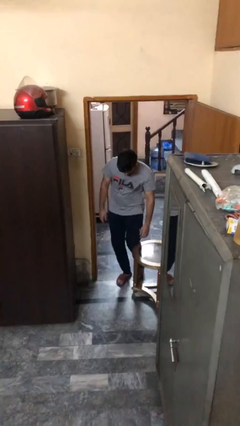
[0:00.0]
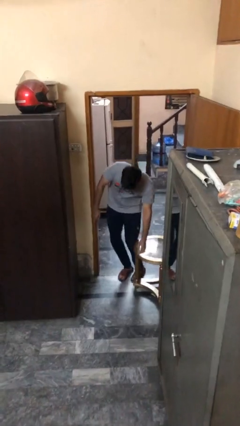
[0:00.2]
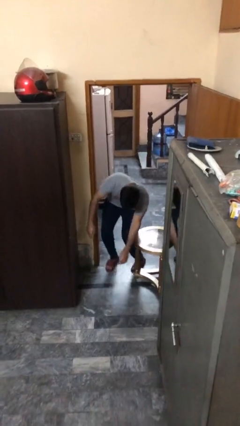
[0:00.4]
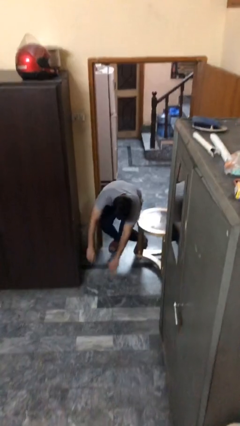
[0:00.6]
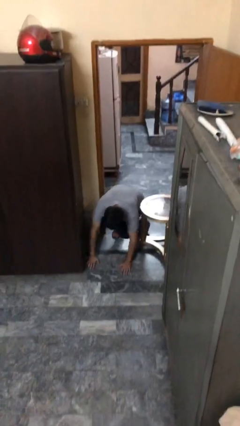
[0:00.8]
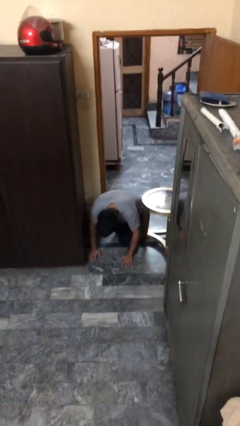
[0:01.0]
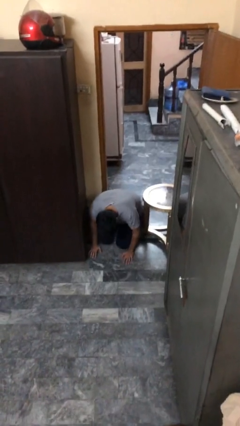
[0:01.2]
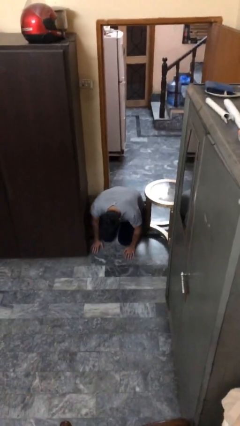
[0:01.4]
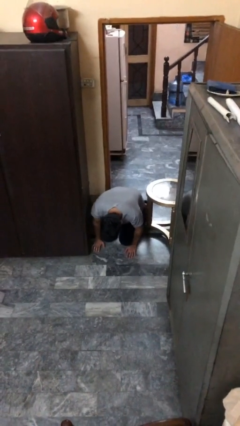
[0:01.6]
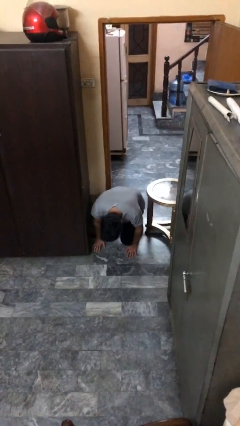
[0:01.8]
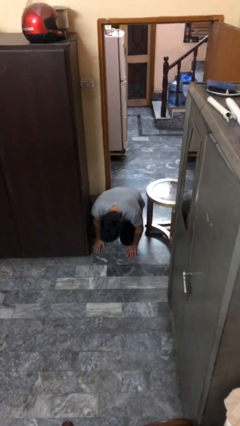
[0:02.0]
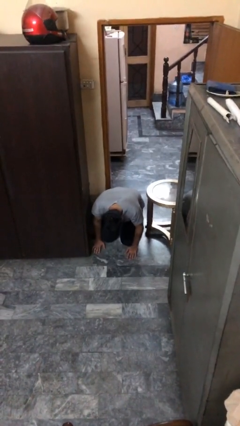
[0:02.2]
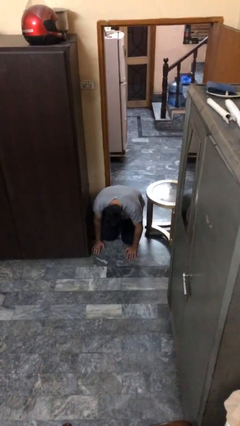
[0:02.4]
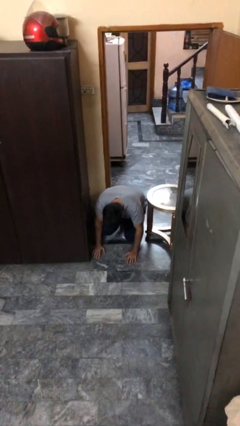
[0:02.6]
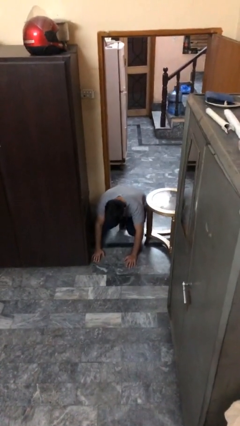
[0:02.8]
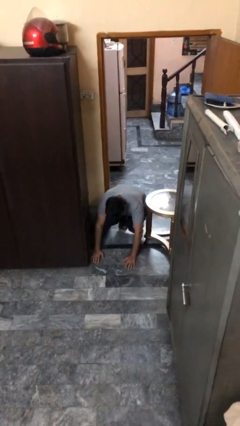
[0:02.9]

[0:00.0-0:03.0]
person trips on object on floor

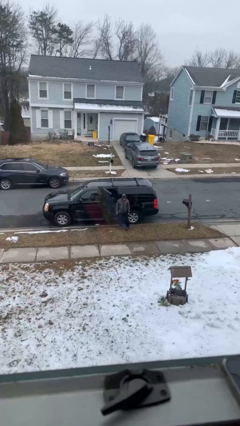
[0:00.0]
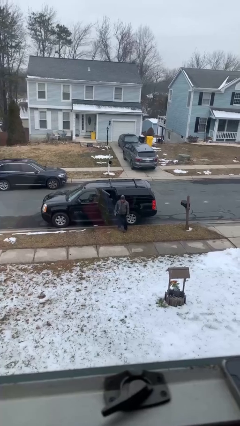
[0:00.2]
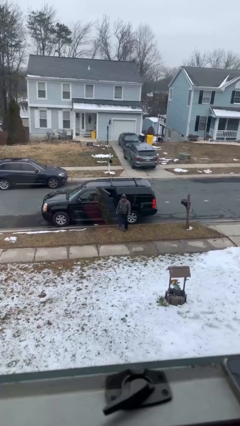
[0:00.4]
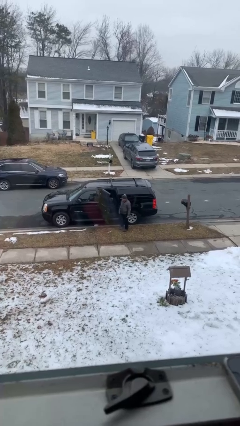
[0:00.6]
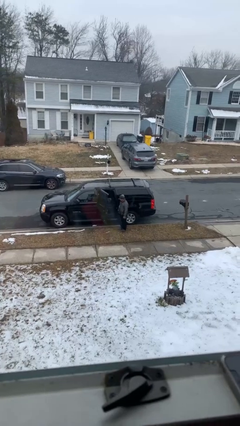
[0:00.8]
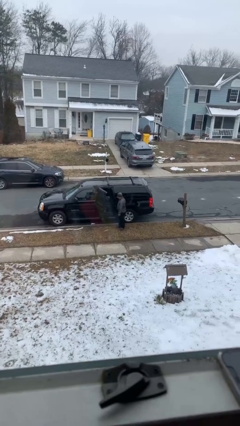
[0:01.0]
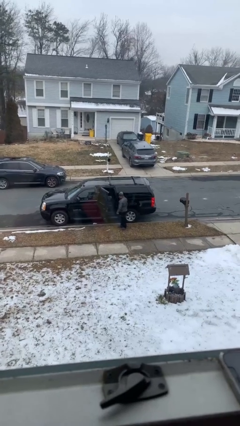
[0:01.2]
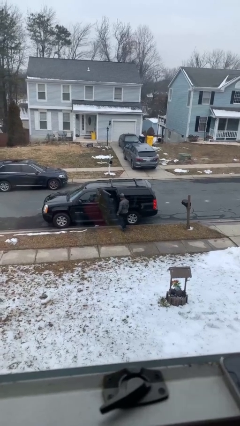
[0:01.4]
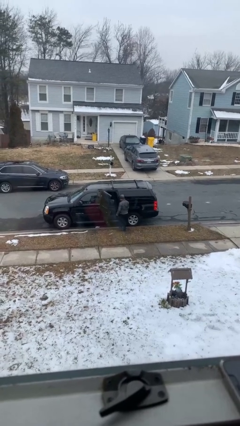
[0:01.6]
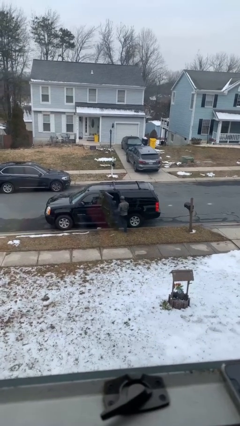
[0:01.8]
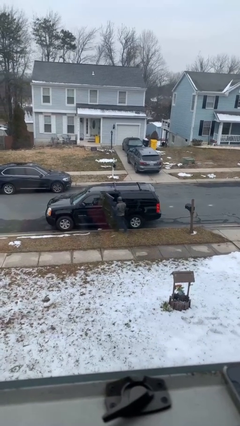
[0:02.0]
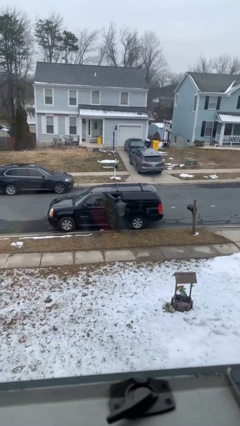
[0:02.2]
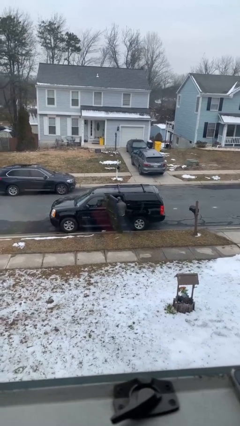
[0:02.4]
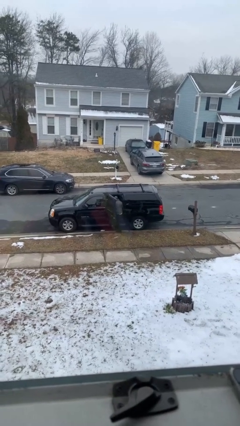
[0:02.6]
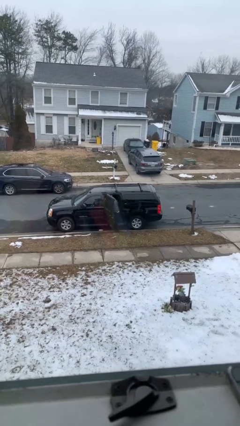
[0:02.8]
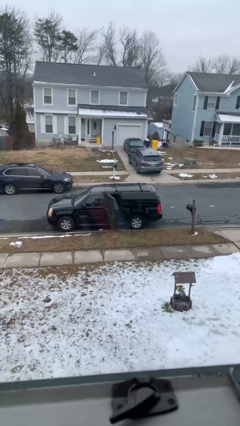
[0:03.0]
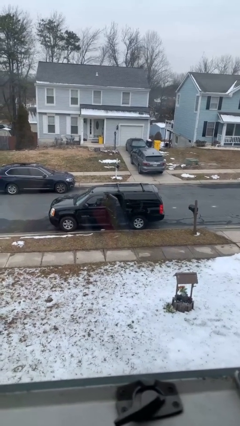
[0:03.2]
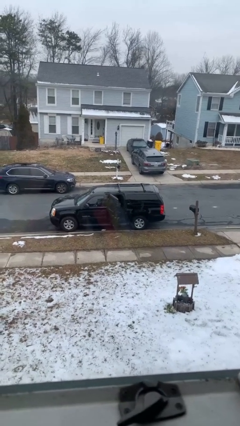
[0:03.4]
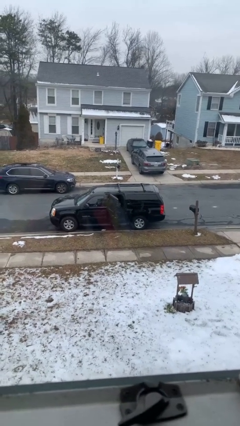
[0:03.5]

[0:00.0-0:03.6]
person enters car

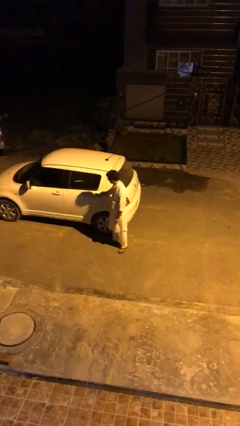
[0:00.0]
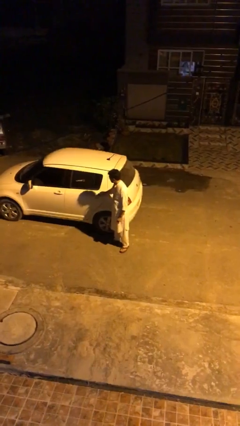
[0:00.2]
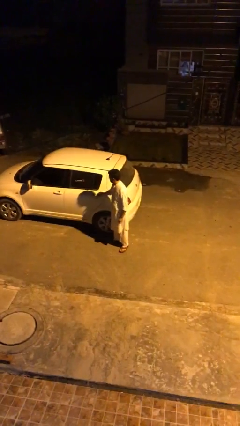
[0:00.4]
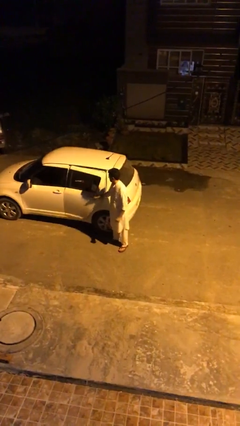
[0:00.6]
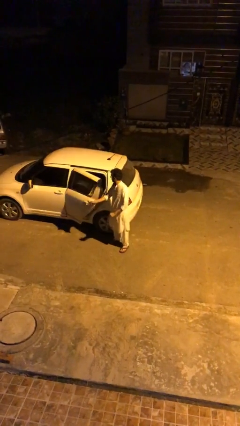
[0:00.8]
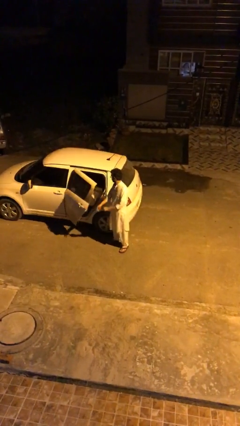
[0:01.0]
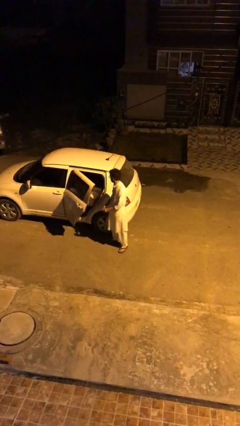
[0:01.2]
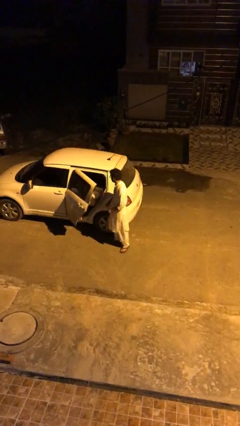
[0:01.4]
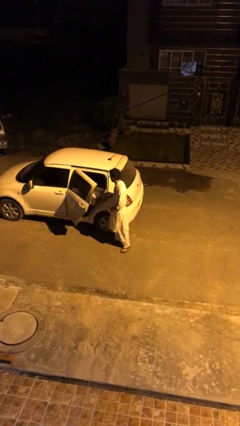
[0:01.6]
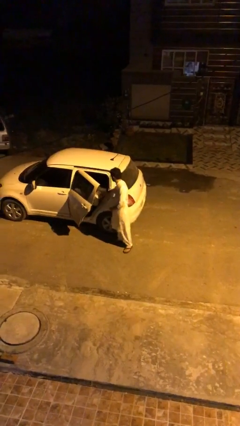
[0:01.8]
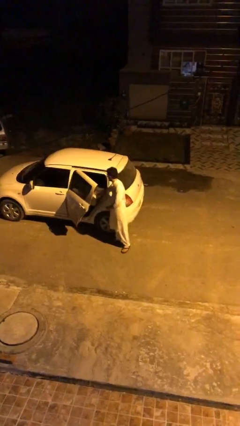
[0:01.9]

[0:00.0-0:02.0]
person opens car door

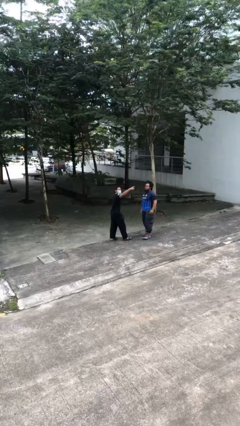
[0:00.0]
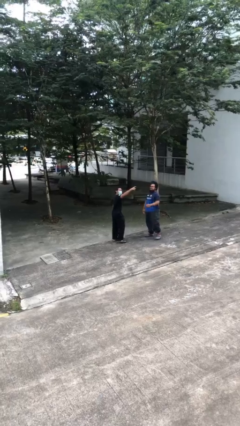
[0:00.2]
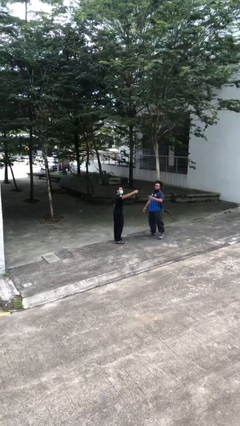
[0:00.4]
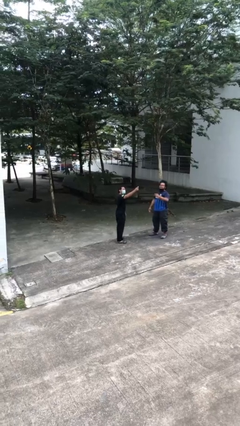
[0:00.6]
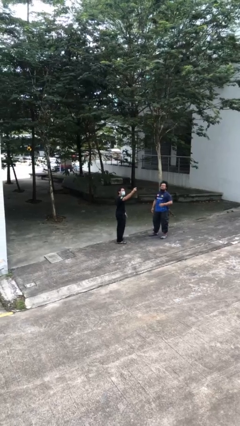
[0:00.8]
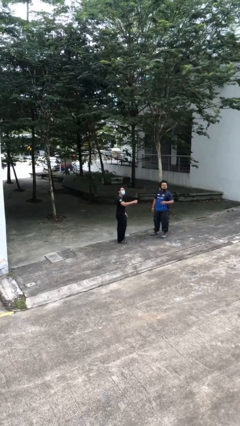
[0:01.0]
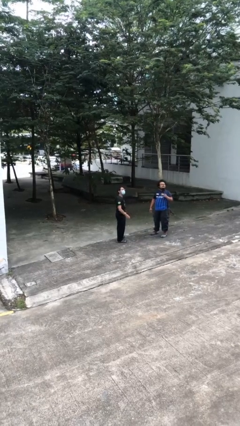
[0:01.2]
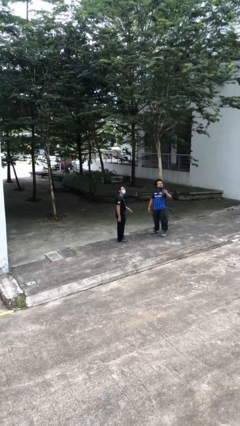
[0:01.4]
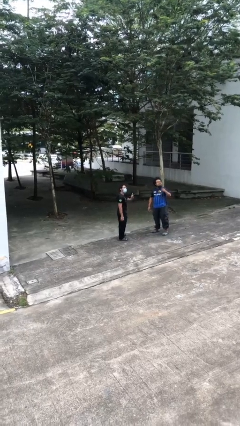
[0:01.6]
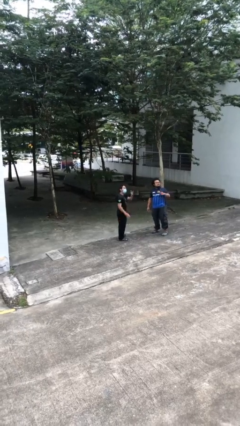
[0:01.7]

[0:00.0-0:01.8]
person talks to person

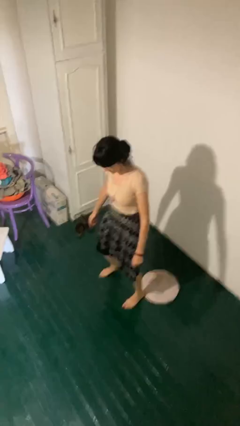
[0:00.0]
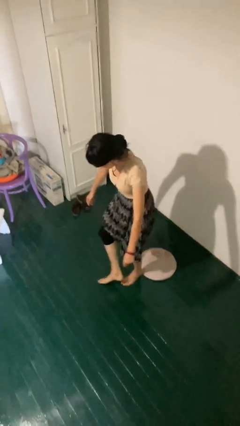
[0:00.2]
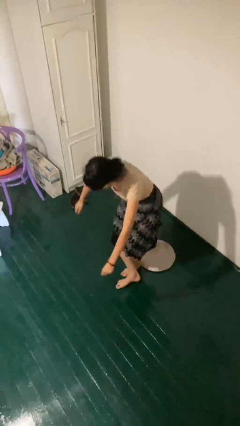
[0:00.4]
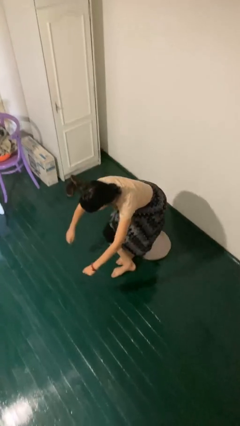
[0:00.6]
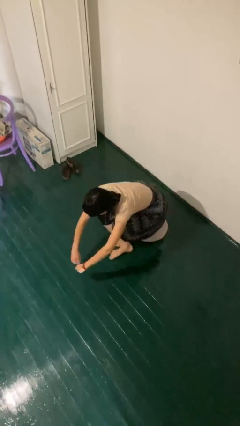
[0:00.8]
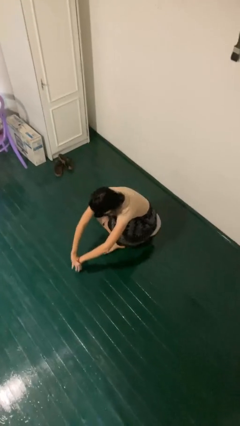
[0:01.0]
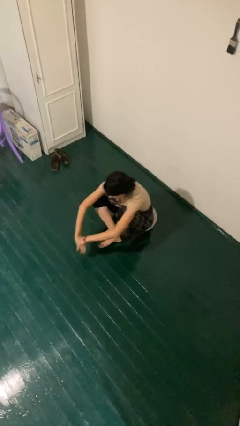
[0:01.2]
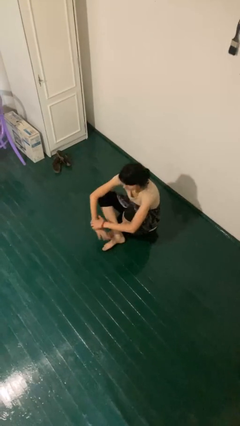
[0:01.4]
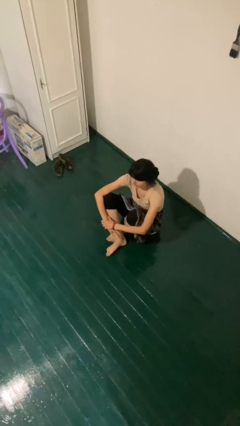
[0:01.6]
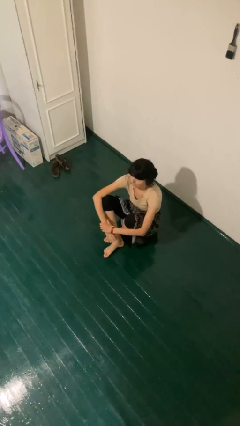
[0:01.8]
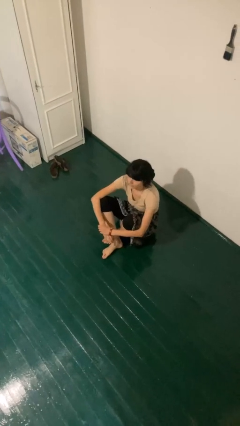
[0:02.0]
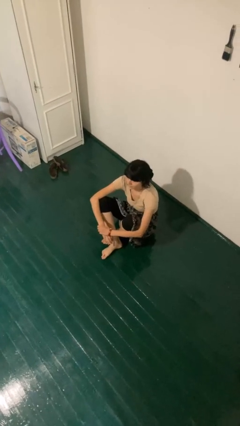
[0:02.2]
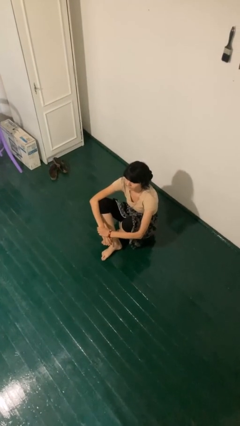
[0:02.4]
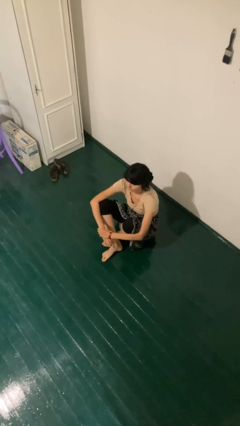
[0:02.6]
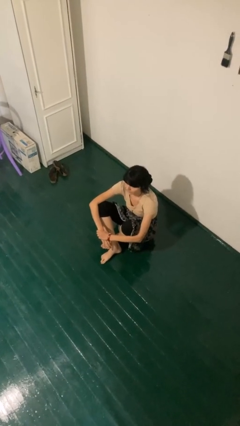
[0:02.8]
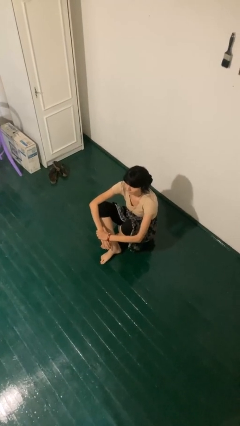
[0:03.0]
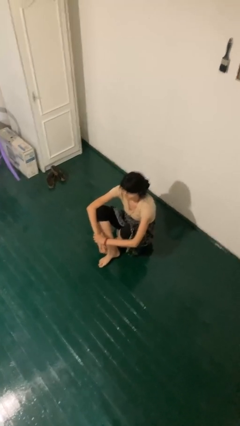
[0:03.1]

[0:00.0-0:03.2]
person sits crisscross

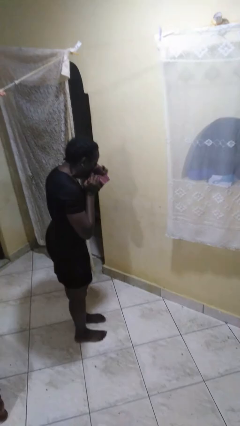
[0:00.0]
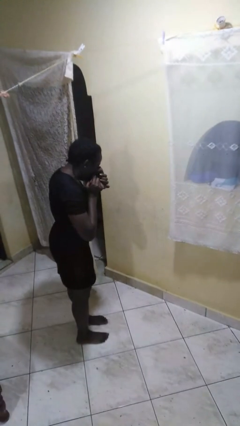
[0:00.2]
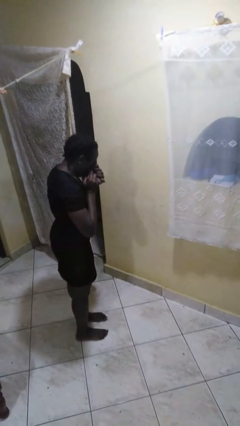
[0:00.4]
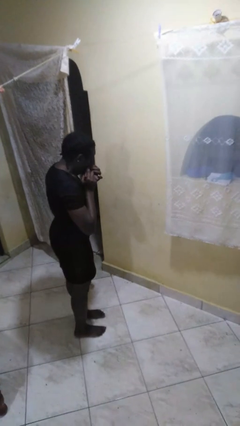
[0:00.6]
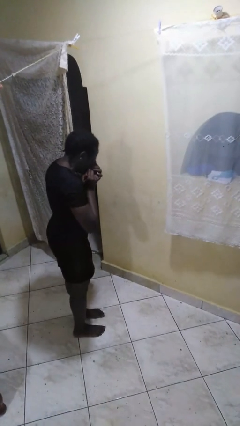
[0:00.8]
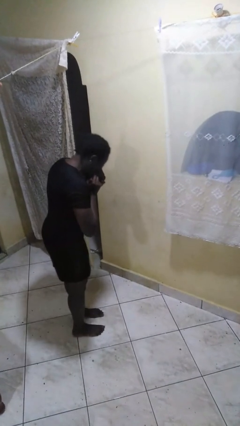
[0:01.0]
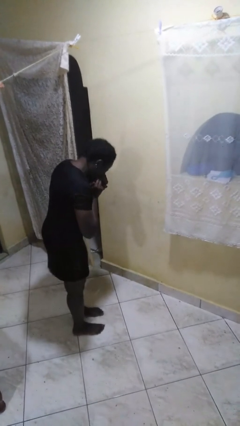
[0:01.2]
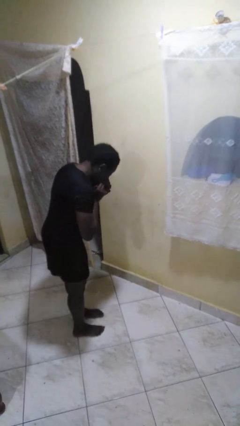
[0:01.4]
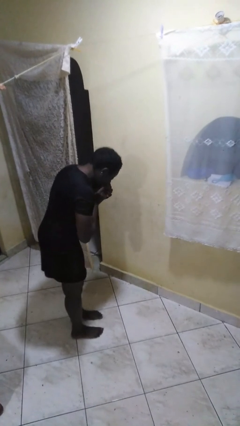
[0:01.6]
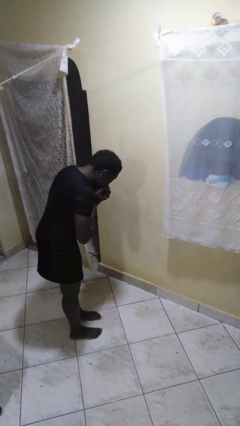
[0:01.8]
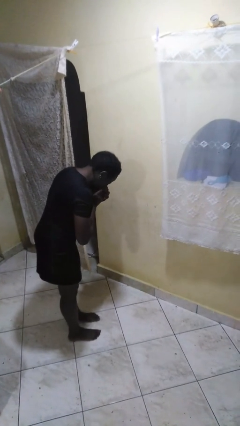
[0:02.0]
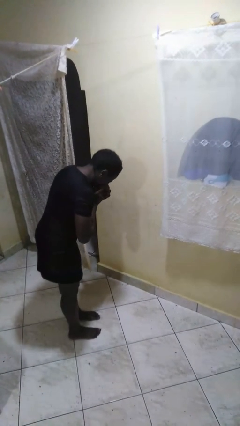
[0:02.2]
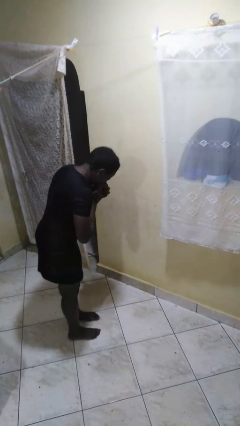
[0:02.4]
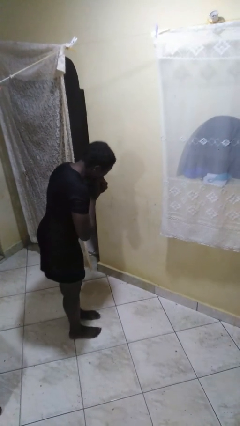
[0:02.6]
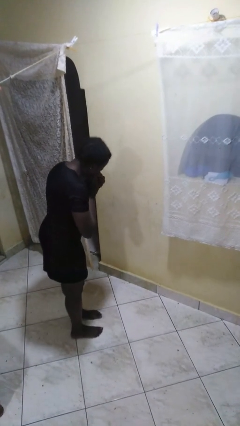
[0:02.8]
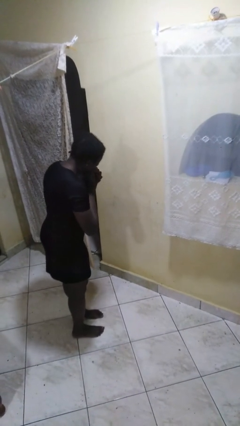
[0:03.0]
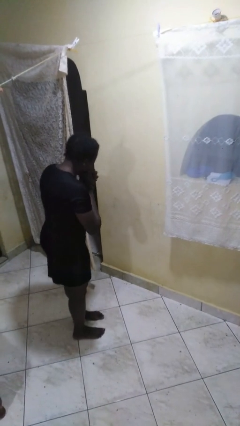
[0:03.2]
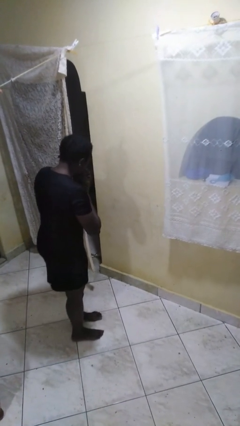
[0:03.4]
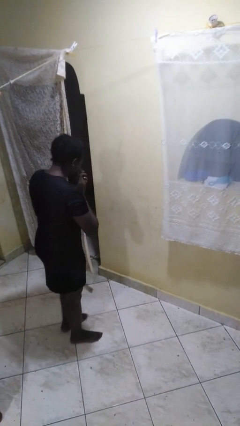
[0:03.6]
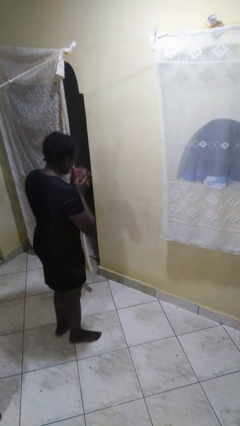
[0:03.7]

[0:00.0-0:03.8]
person blows nose
